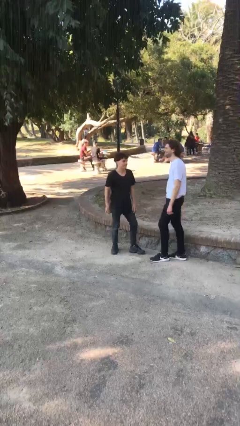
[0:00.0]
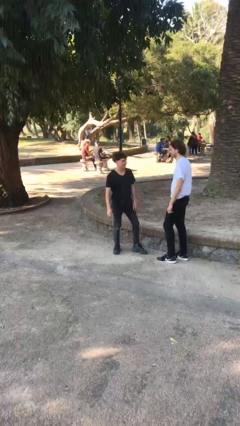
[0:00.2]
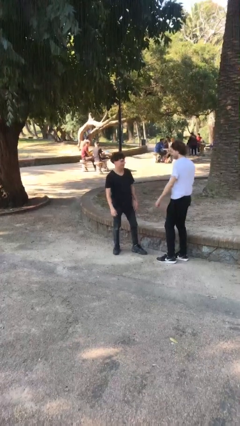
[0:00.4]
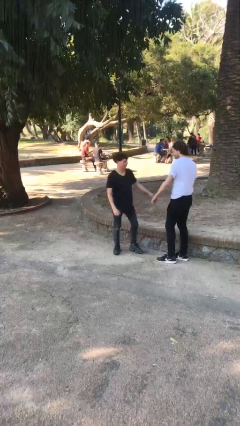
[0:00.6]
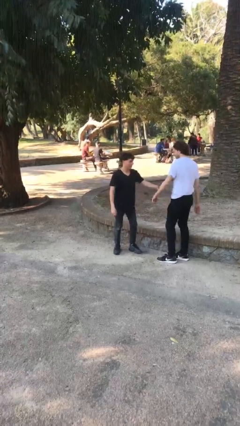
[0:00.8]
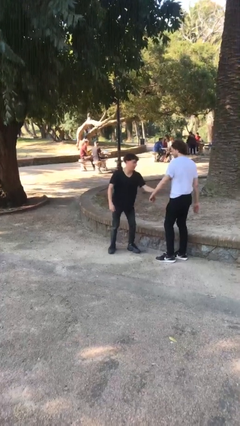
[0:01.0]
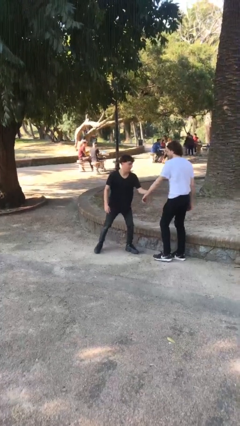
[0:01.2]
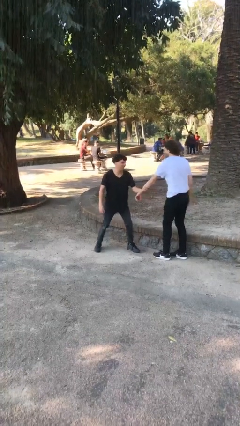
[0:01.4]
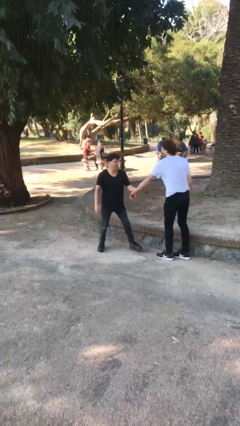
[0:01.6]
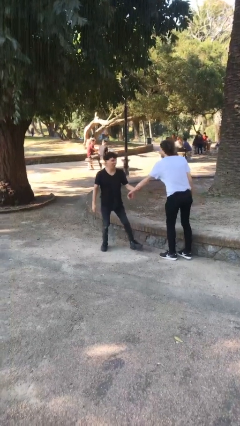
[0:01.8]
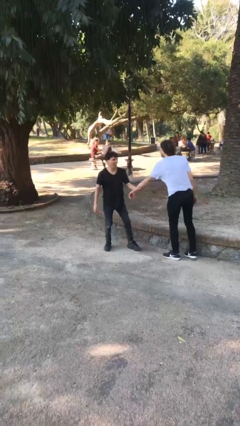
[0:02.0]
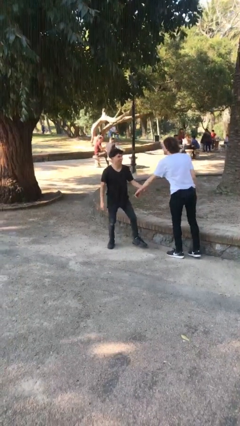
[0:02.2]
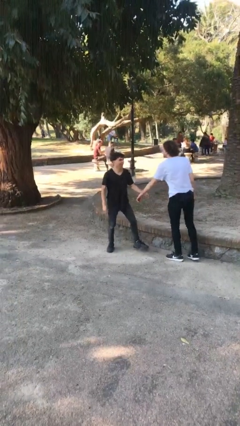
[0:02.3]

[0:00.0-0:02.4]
person grabs person by forearm

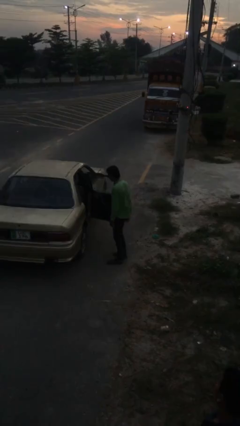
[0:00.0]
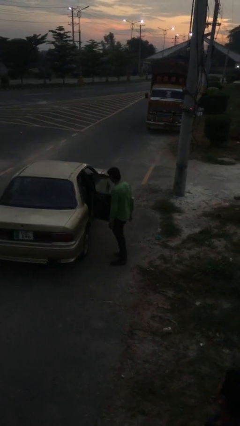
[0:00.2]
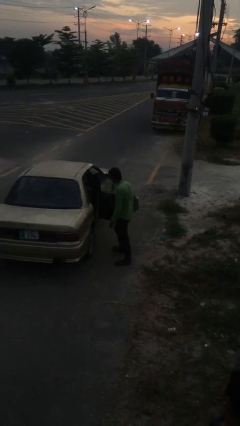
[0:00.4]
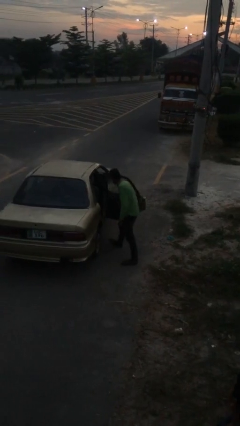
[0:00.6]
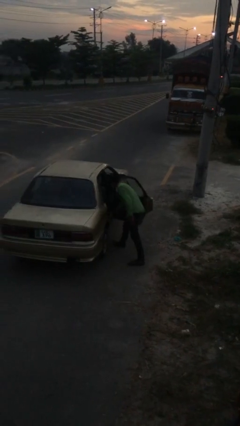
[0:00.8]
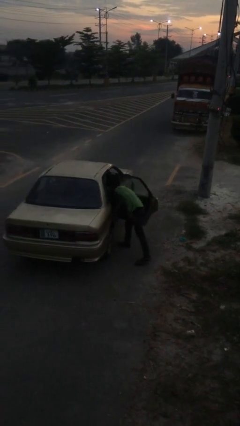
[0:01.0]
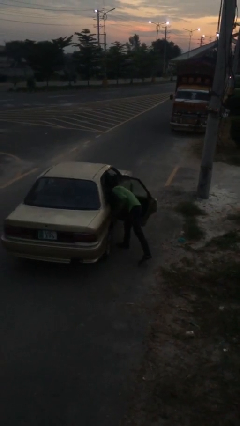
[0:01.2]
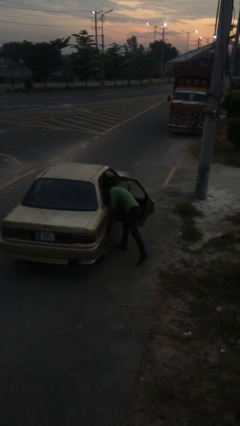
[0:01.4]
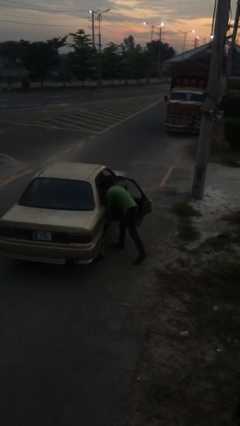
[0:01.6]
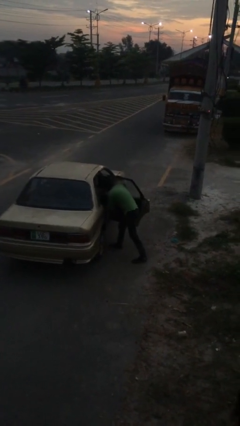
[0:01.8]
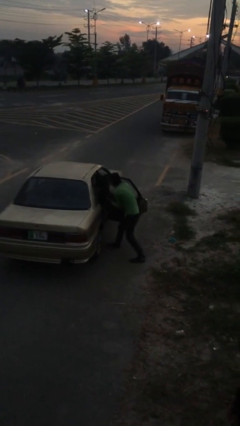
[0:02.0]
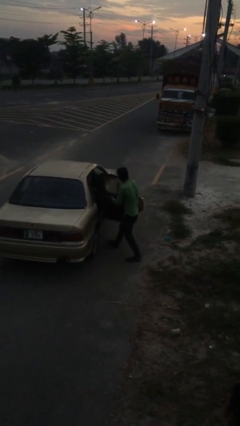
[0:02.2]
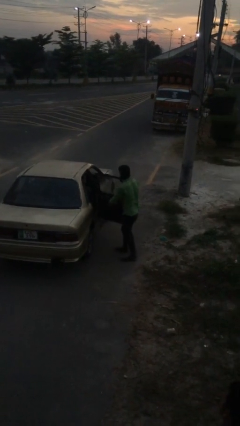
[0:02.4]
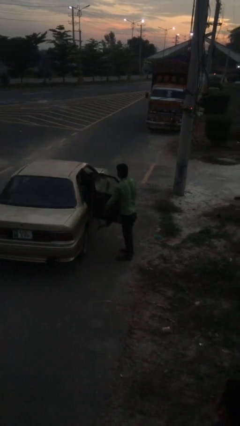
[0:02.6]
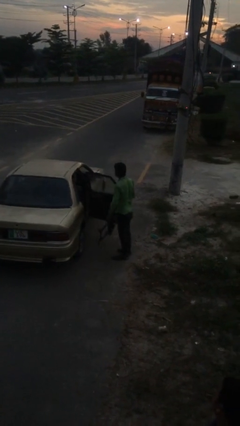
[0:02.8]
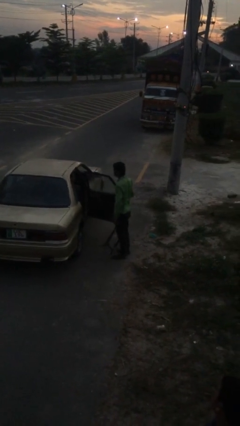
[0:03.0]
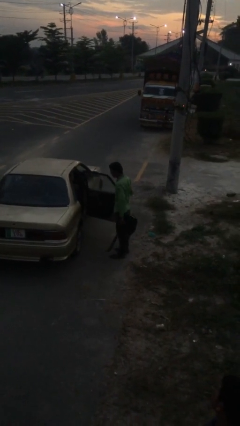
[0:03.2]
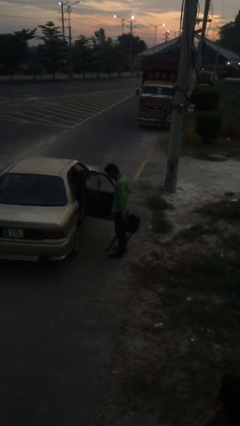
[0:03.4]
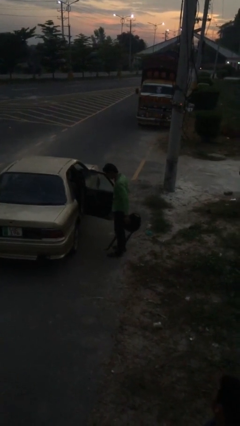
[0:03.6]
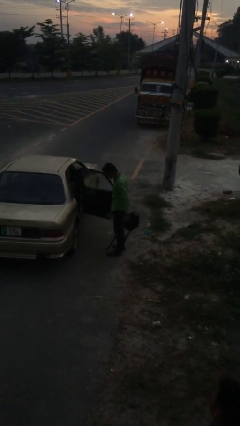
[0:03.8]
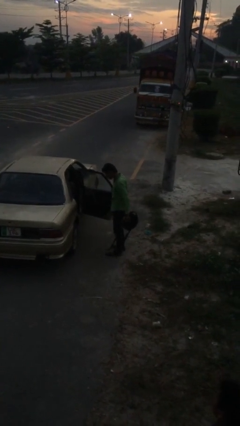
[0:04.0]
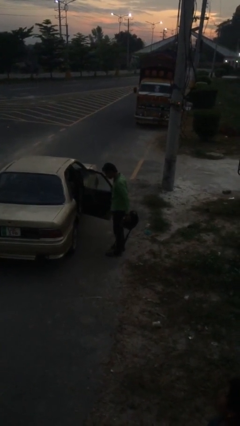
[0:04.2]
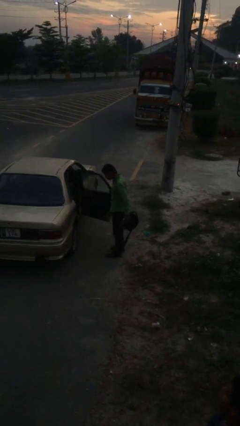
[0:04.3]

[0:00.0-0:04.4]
person unloads car

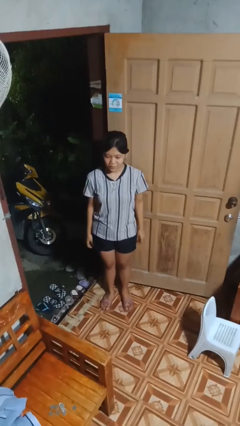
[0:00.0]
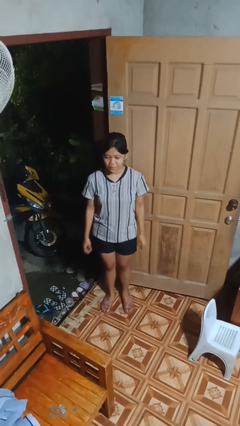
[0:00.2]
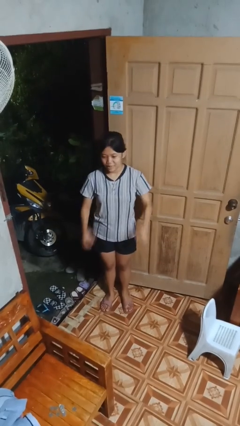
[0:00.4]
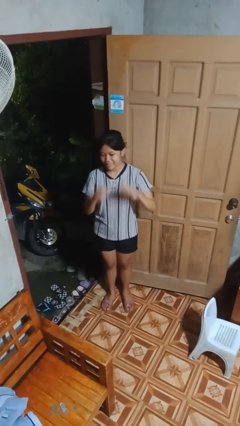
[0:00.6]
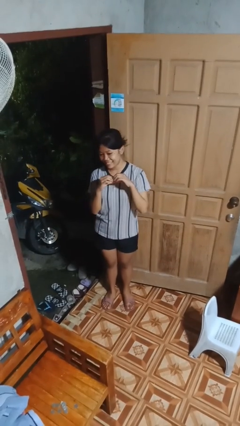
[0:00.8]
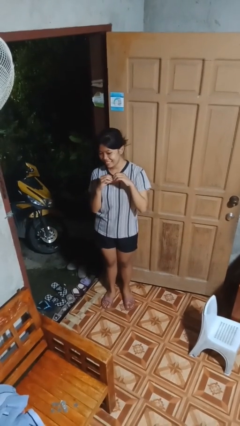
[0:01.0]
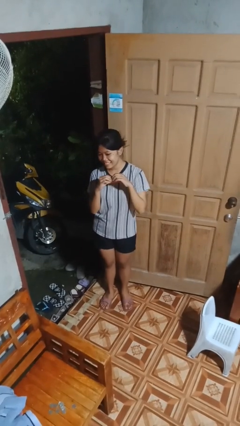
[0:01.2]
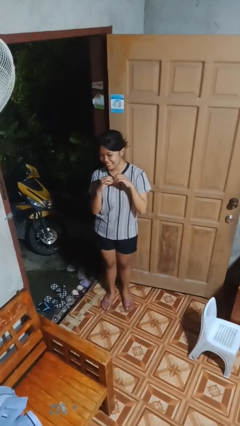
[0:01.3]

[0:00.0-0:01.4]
person gestures heart

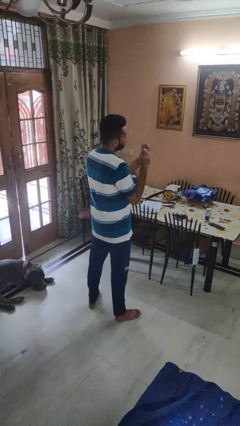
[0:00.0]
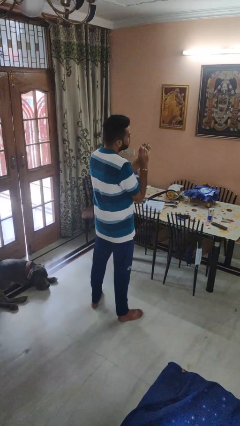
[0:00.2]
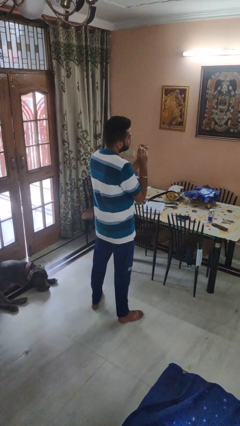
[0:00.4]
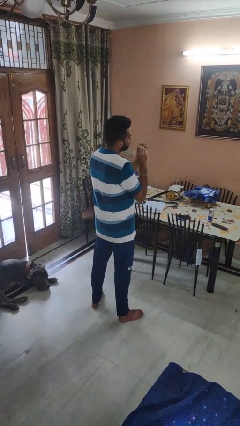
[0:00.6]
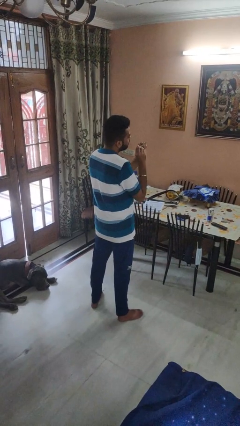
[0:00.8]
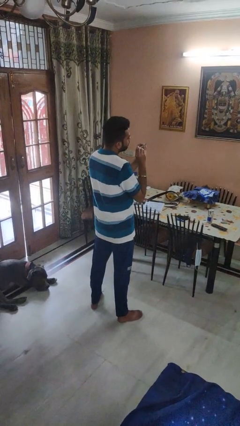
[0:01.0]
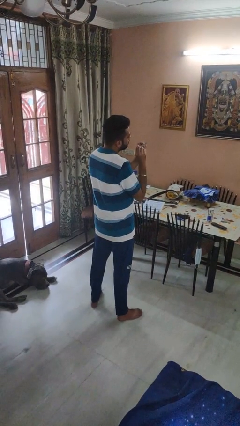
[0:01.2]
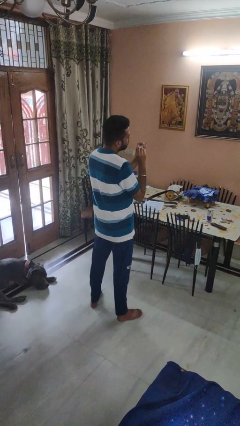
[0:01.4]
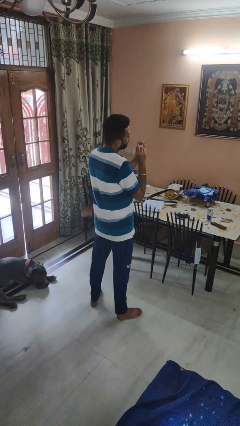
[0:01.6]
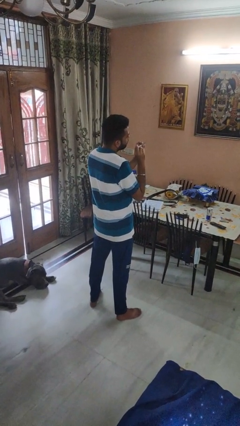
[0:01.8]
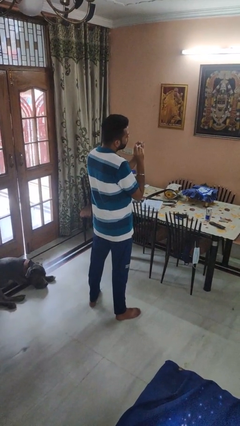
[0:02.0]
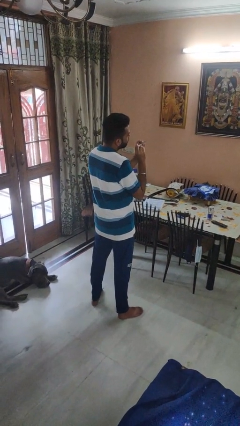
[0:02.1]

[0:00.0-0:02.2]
person files fingernails

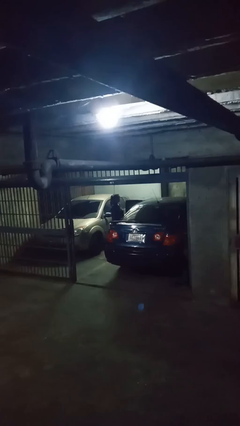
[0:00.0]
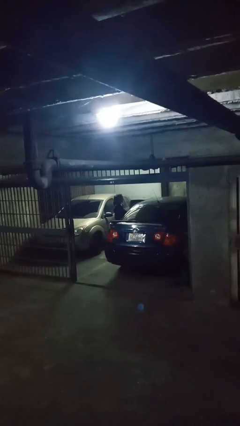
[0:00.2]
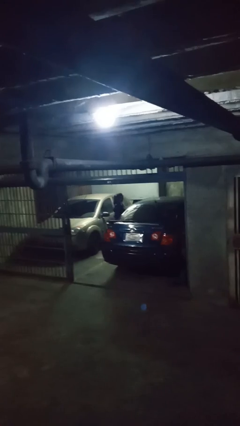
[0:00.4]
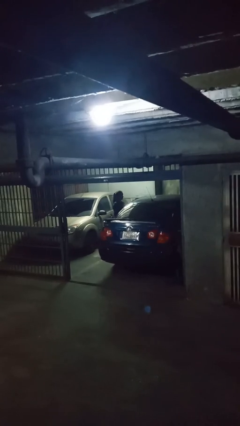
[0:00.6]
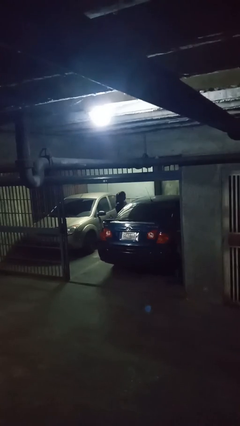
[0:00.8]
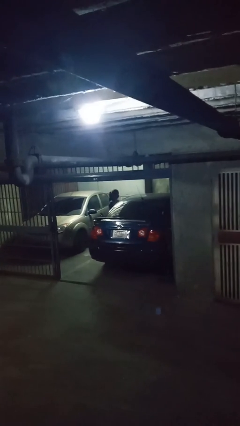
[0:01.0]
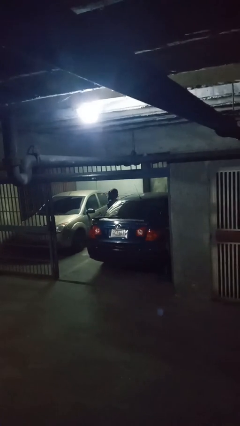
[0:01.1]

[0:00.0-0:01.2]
person closes car door

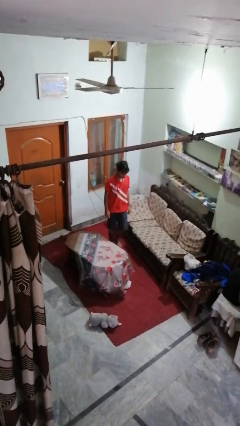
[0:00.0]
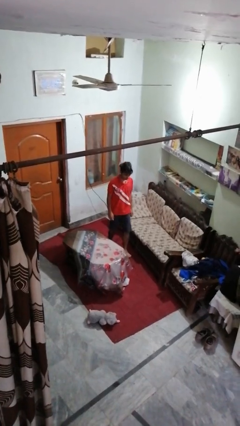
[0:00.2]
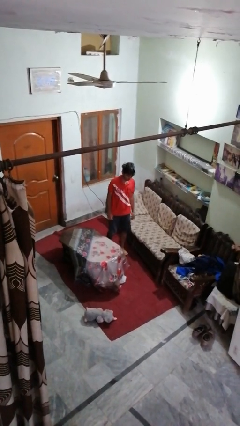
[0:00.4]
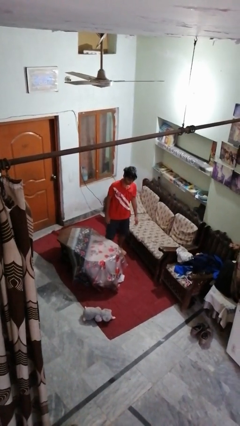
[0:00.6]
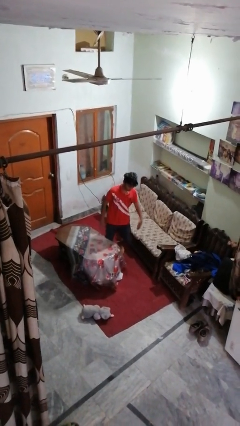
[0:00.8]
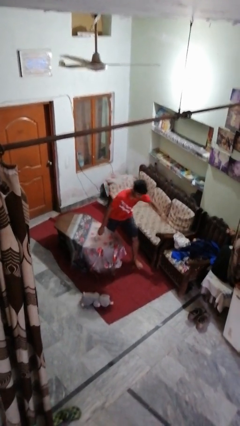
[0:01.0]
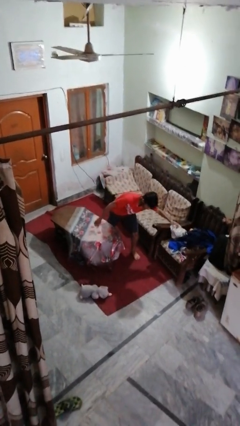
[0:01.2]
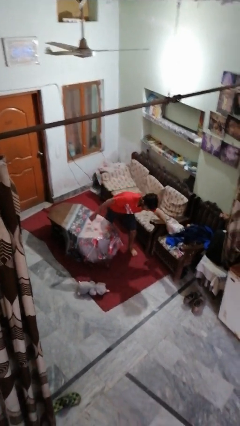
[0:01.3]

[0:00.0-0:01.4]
person trips on object on floor

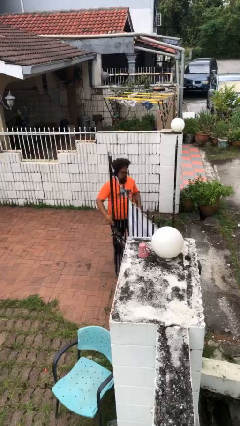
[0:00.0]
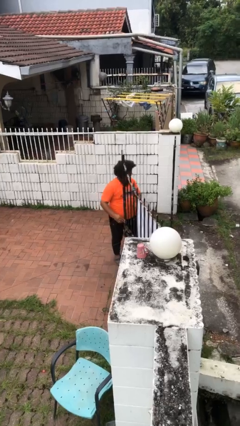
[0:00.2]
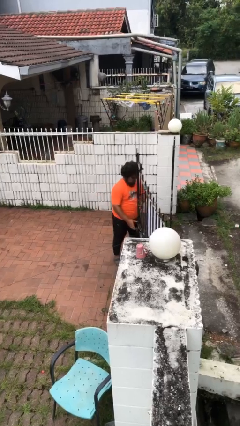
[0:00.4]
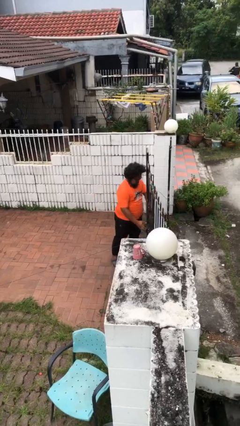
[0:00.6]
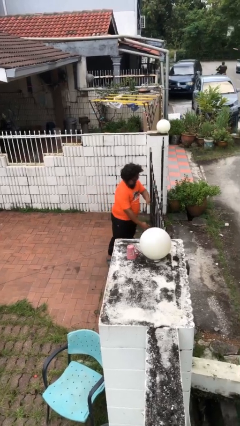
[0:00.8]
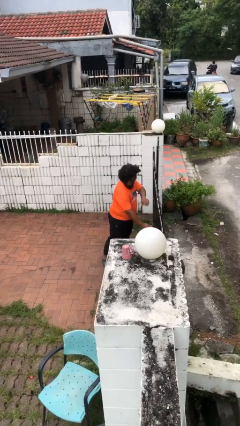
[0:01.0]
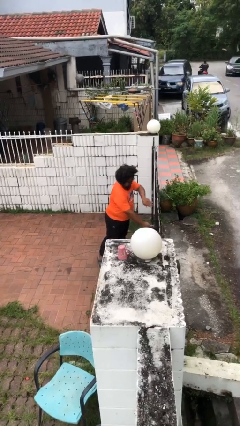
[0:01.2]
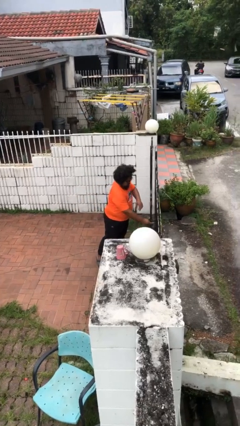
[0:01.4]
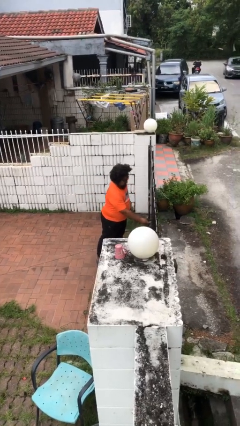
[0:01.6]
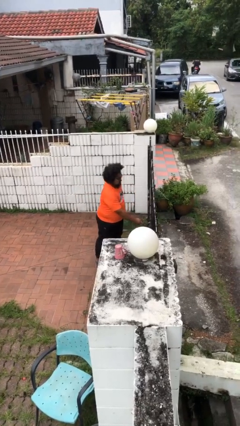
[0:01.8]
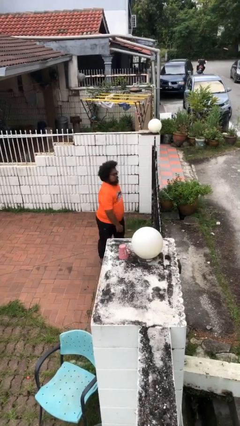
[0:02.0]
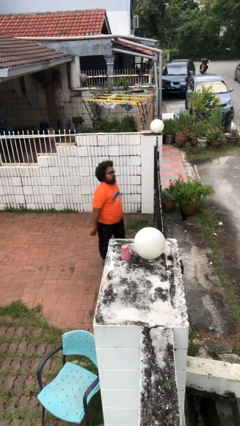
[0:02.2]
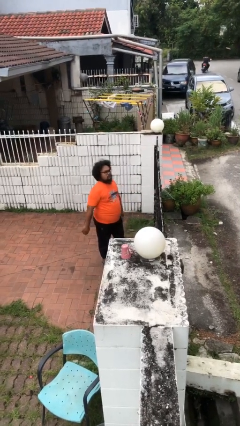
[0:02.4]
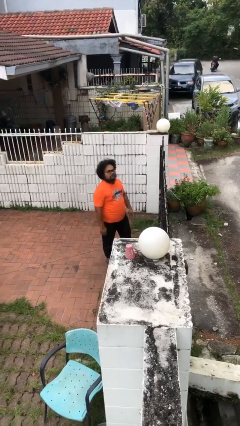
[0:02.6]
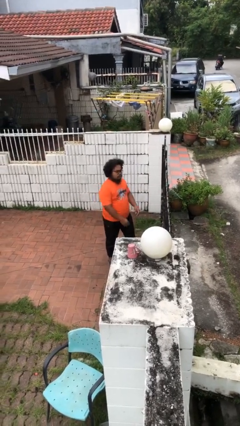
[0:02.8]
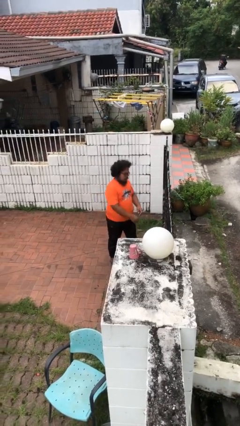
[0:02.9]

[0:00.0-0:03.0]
person closes facility door

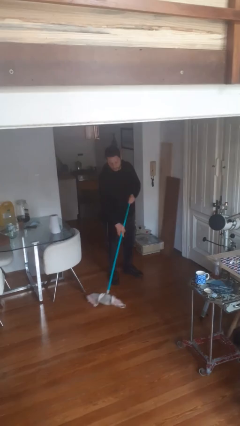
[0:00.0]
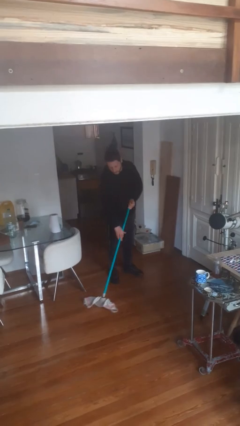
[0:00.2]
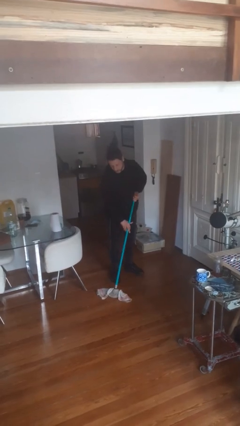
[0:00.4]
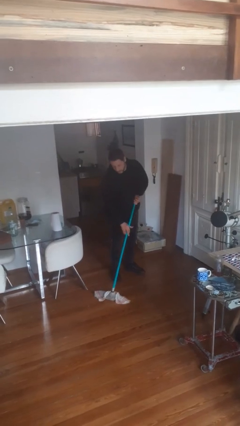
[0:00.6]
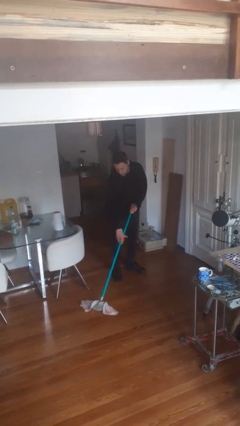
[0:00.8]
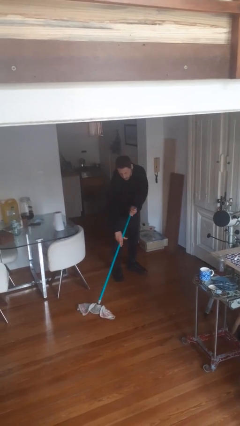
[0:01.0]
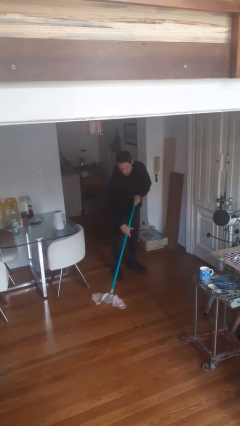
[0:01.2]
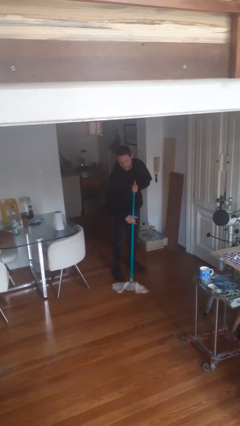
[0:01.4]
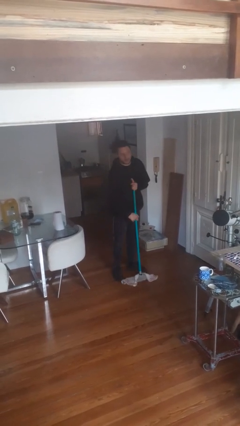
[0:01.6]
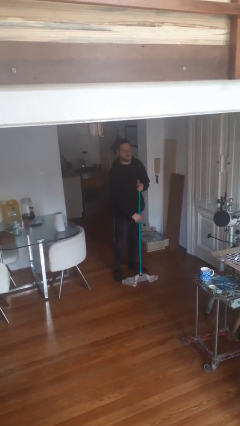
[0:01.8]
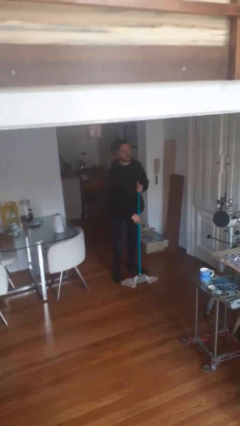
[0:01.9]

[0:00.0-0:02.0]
person mops
